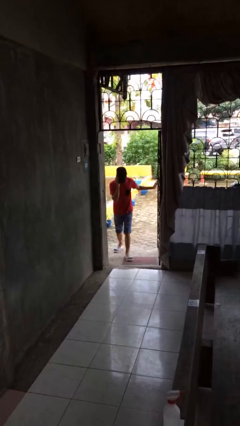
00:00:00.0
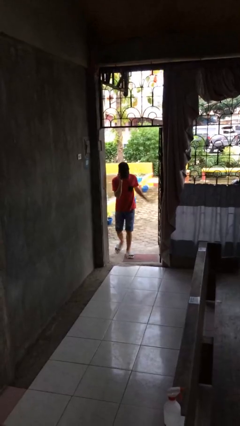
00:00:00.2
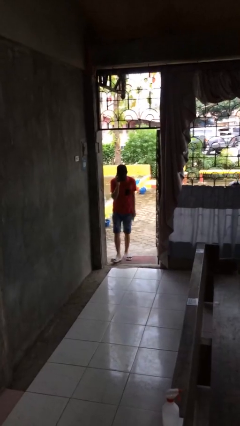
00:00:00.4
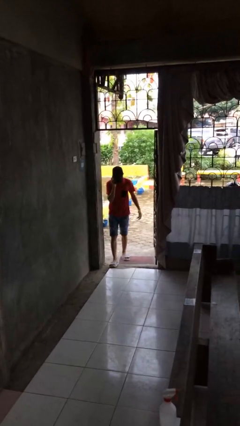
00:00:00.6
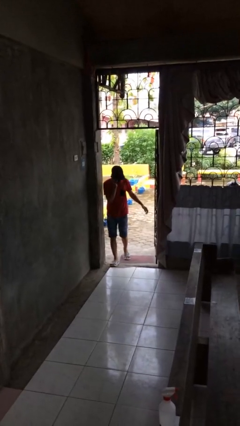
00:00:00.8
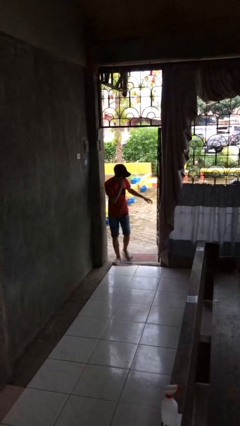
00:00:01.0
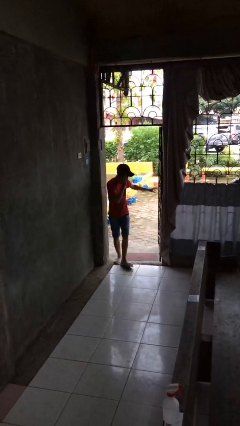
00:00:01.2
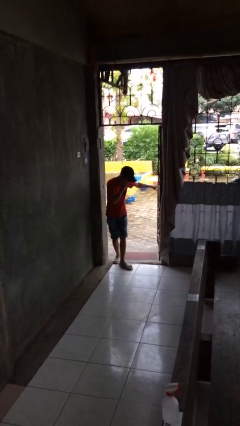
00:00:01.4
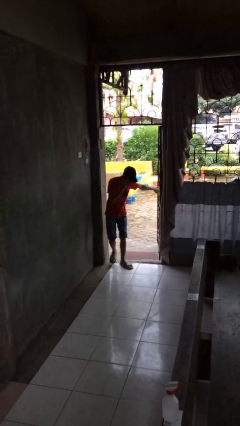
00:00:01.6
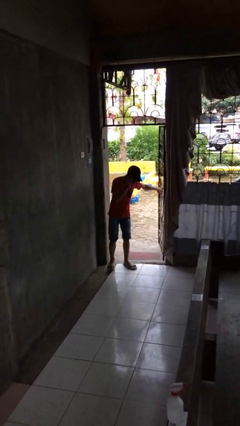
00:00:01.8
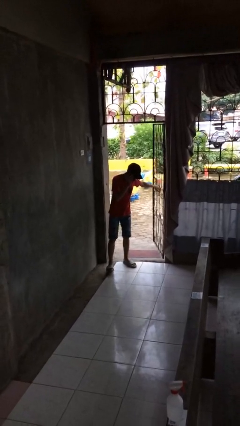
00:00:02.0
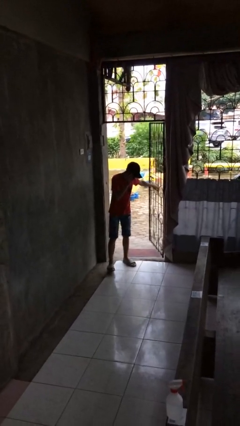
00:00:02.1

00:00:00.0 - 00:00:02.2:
person enters scene through structure

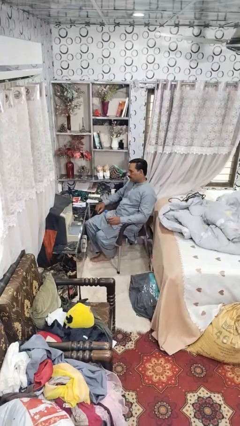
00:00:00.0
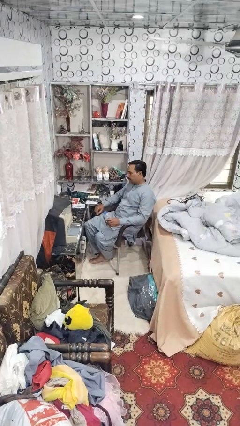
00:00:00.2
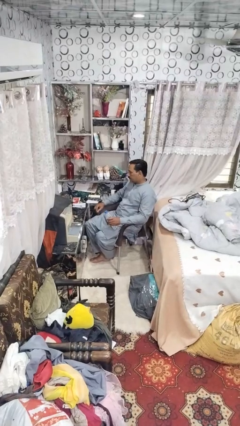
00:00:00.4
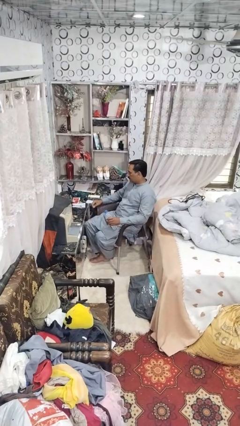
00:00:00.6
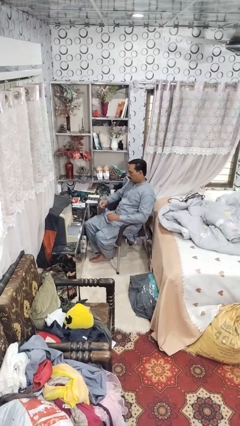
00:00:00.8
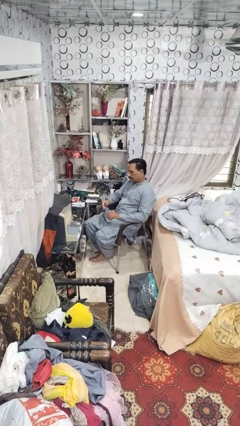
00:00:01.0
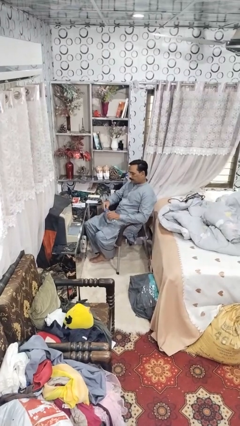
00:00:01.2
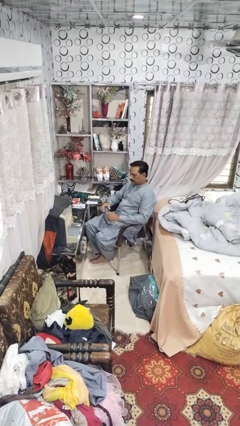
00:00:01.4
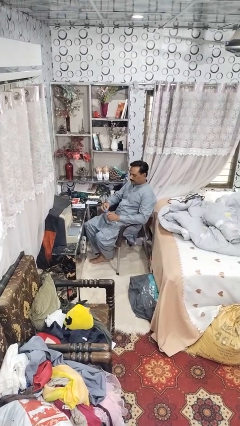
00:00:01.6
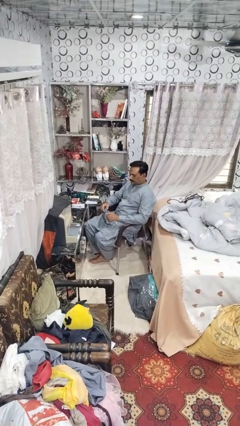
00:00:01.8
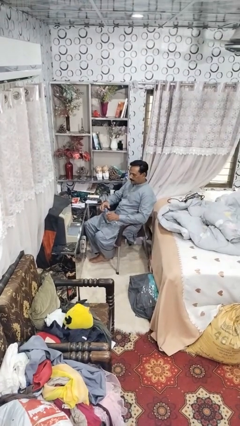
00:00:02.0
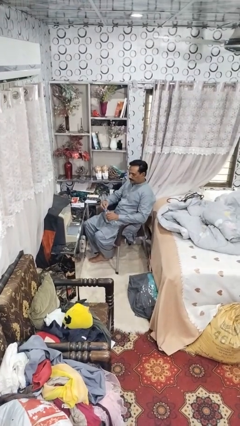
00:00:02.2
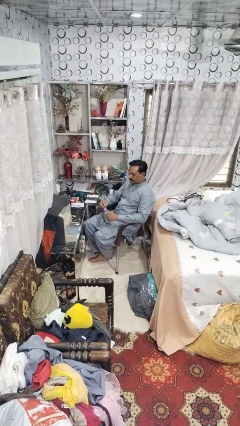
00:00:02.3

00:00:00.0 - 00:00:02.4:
person unscrews lid from bottle

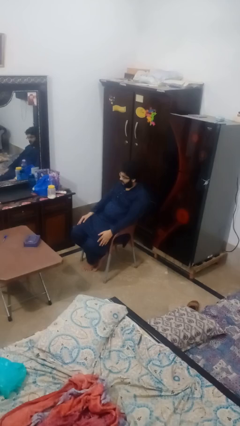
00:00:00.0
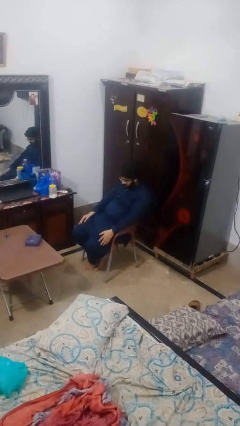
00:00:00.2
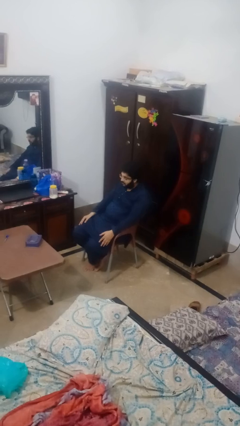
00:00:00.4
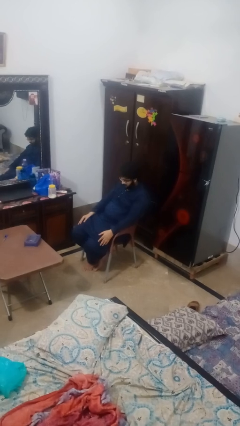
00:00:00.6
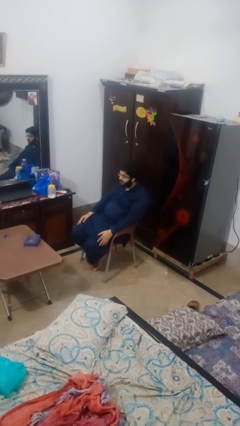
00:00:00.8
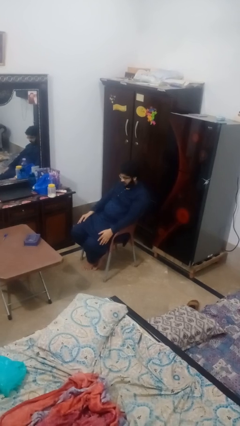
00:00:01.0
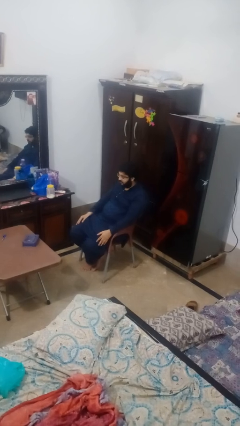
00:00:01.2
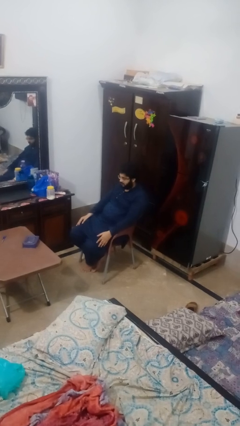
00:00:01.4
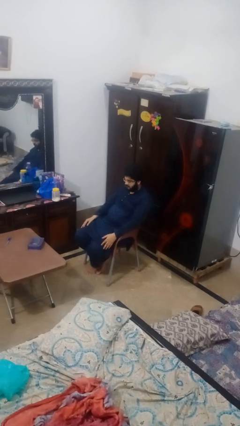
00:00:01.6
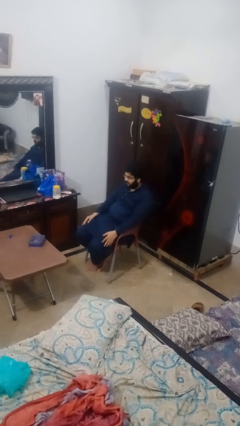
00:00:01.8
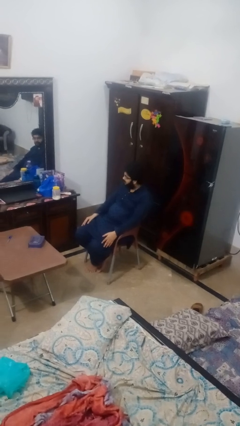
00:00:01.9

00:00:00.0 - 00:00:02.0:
person nods head

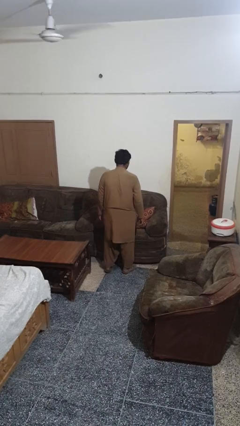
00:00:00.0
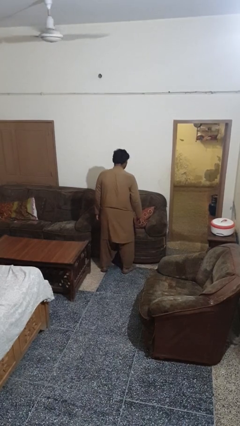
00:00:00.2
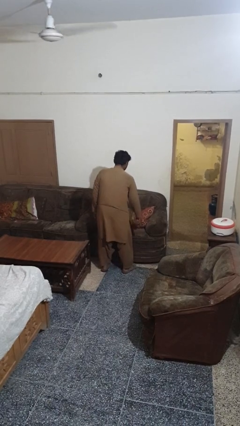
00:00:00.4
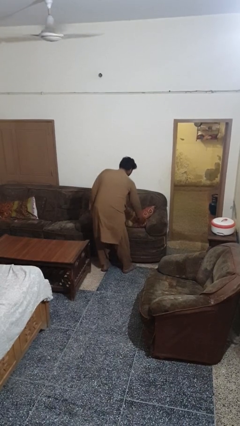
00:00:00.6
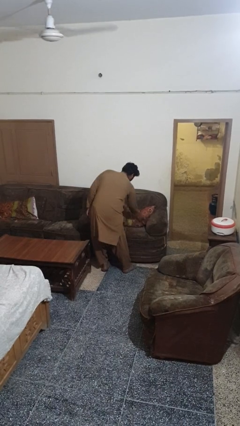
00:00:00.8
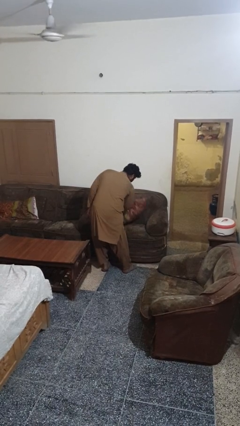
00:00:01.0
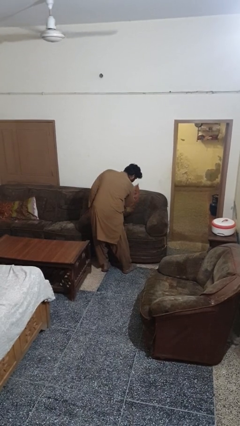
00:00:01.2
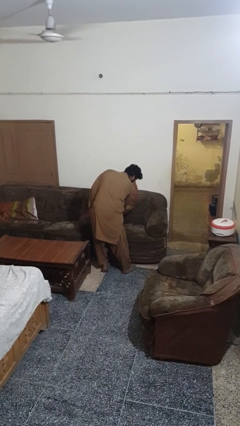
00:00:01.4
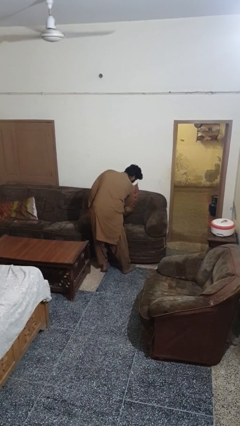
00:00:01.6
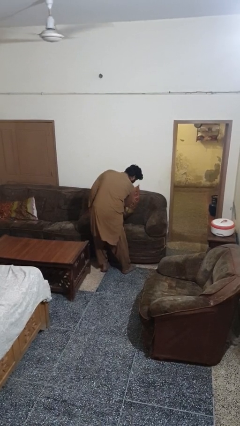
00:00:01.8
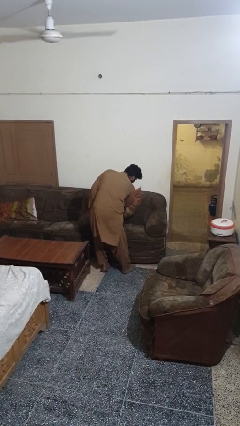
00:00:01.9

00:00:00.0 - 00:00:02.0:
person searches in couch

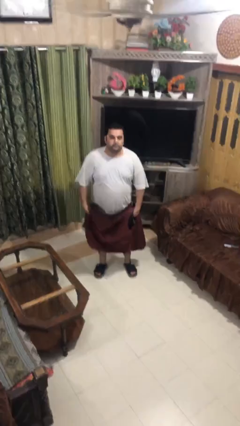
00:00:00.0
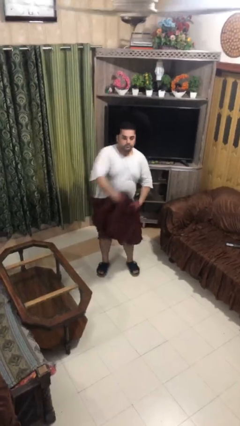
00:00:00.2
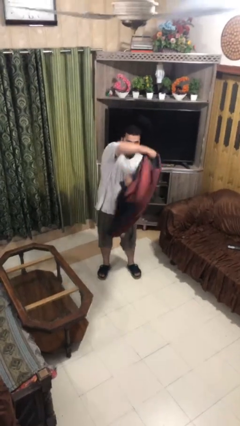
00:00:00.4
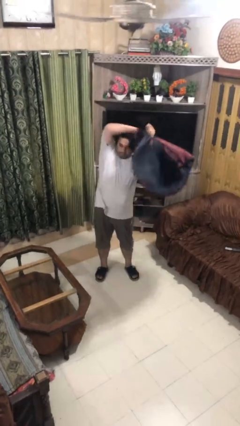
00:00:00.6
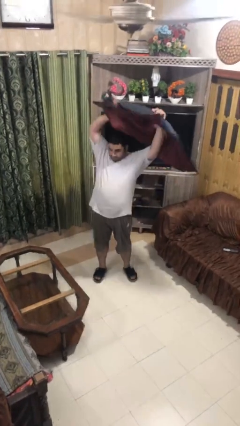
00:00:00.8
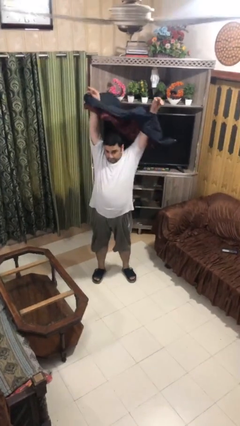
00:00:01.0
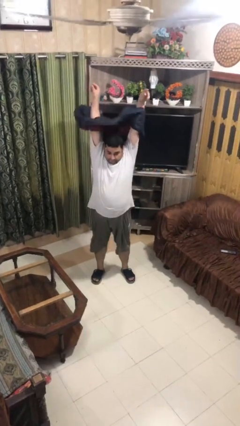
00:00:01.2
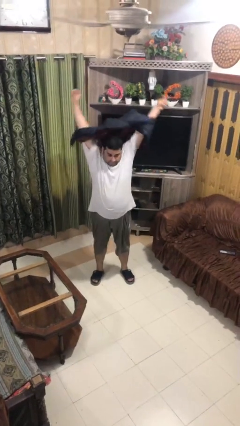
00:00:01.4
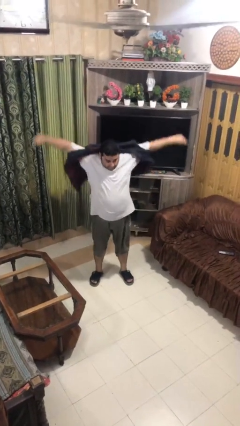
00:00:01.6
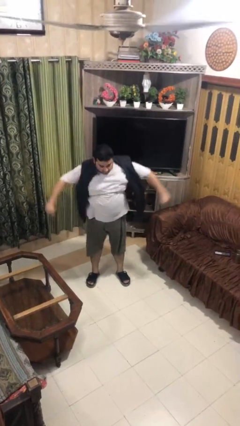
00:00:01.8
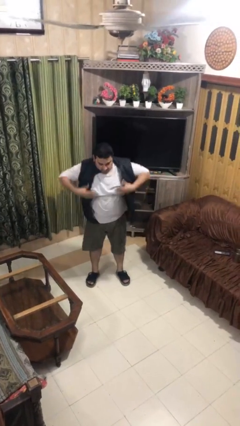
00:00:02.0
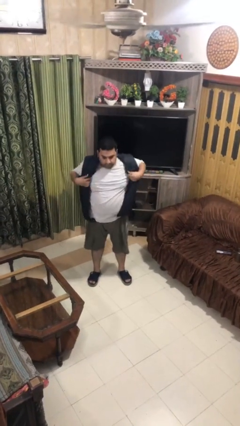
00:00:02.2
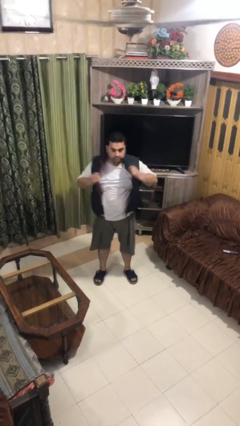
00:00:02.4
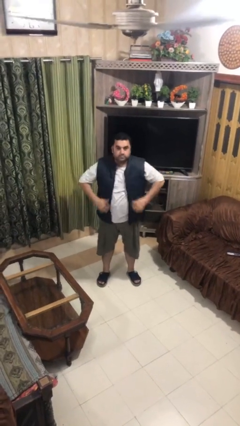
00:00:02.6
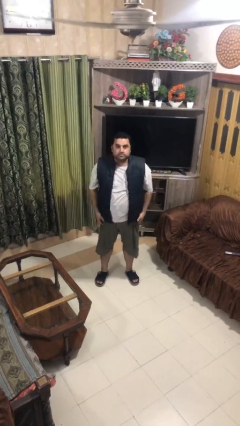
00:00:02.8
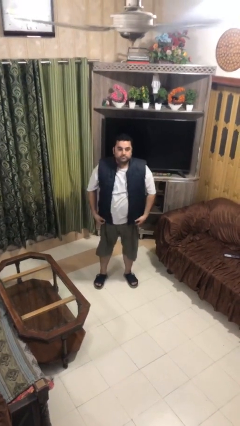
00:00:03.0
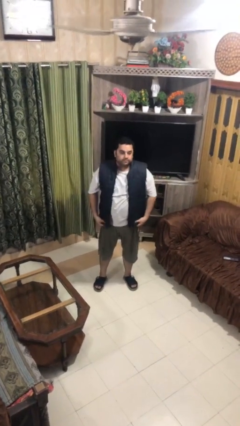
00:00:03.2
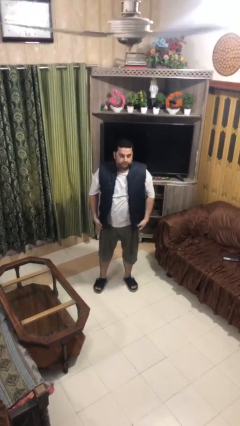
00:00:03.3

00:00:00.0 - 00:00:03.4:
person puts on jacket

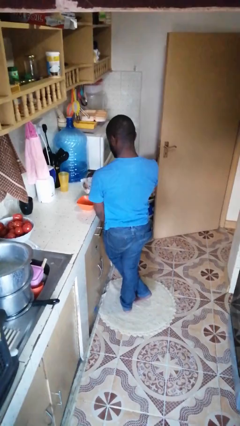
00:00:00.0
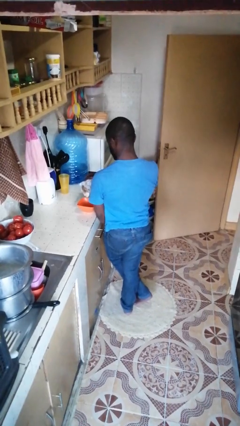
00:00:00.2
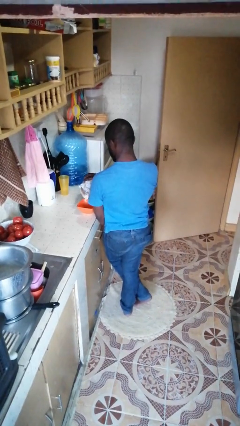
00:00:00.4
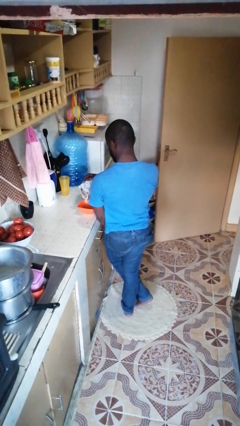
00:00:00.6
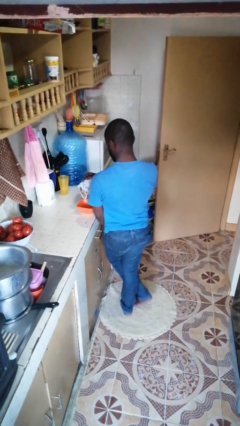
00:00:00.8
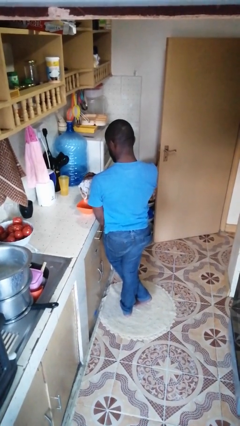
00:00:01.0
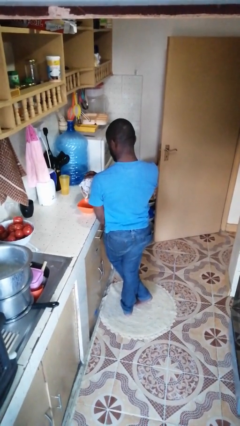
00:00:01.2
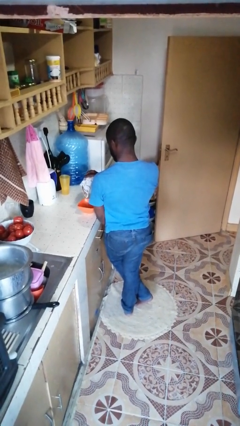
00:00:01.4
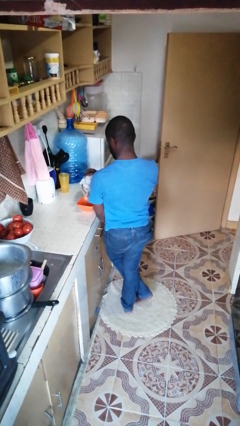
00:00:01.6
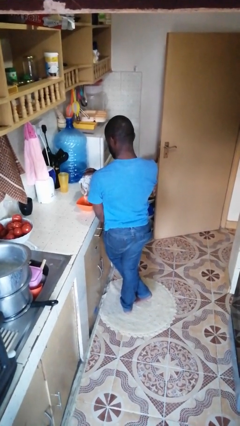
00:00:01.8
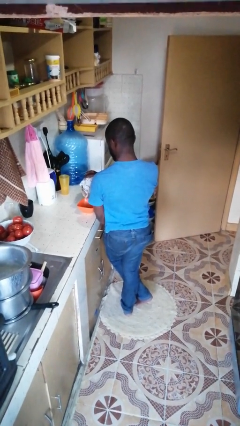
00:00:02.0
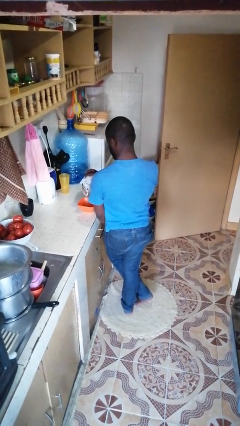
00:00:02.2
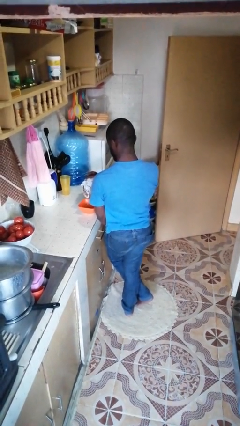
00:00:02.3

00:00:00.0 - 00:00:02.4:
person pours into bowl

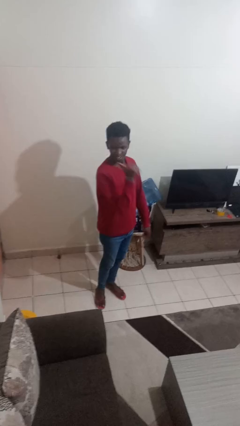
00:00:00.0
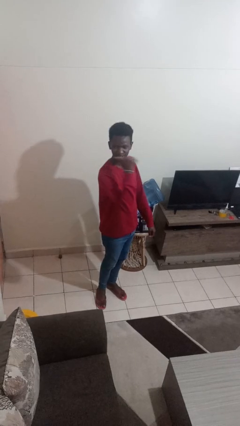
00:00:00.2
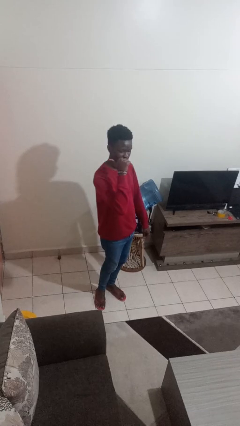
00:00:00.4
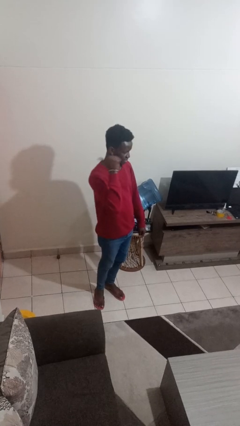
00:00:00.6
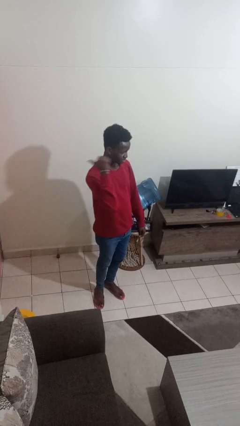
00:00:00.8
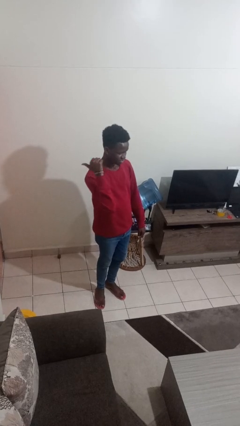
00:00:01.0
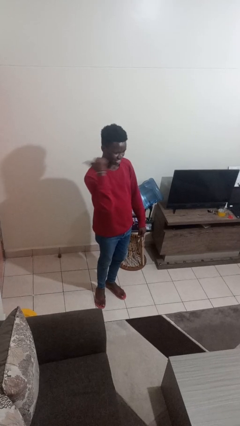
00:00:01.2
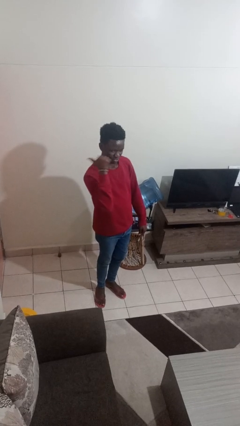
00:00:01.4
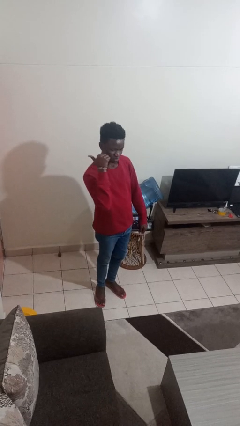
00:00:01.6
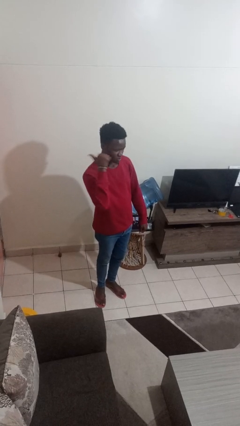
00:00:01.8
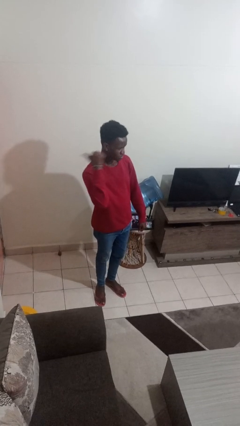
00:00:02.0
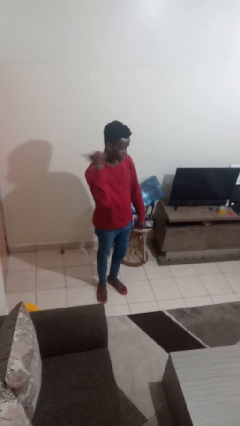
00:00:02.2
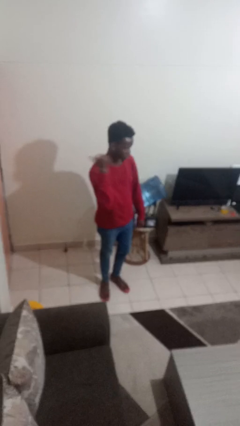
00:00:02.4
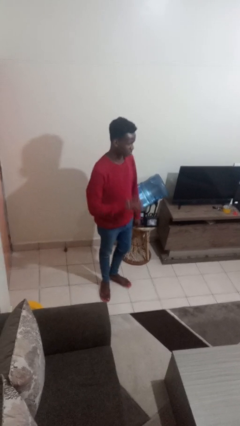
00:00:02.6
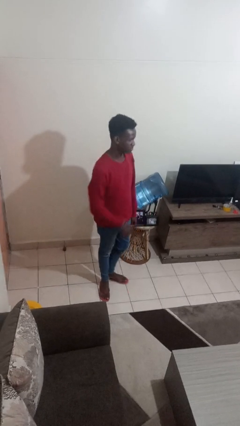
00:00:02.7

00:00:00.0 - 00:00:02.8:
person gestures behind me
